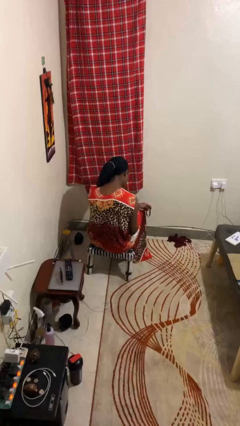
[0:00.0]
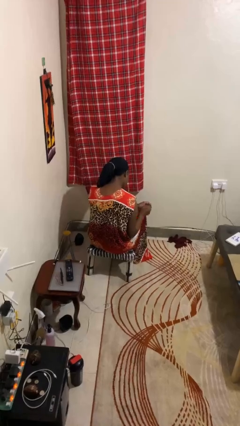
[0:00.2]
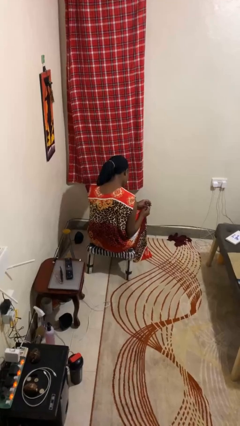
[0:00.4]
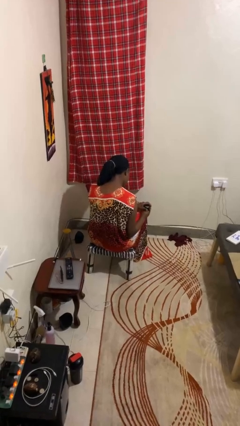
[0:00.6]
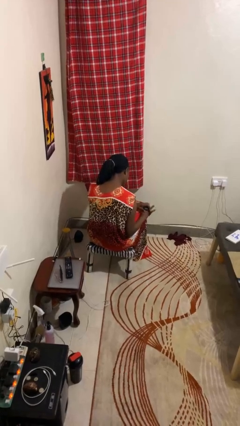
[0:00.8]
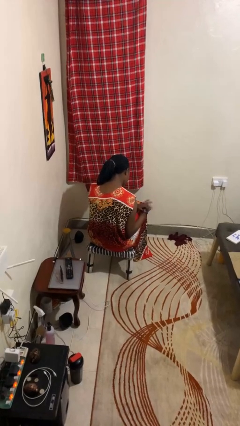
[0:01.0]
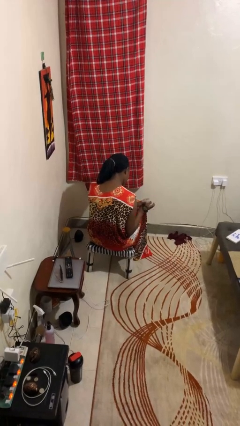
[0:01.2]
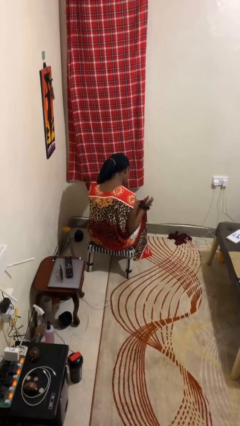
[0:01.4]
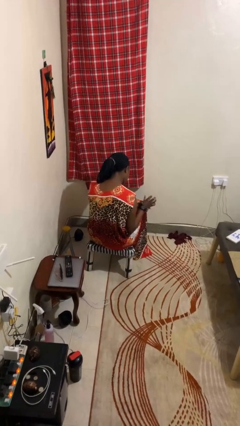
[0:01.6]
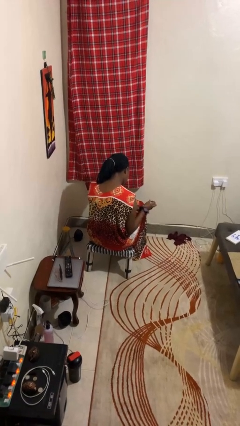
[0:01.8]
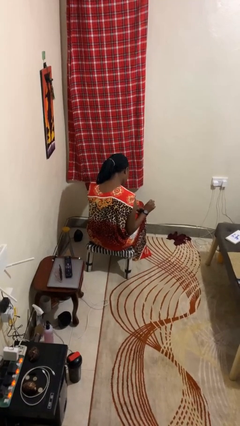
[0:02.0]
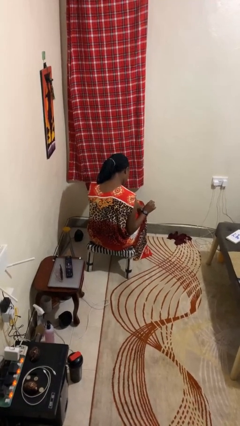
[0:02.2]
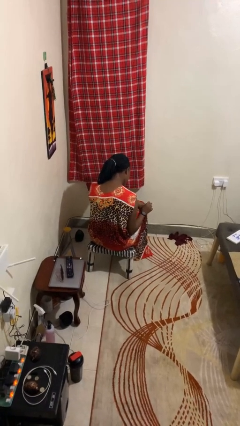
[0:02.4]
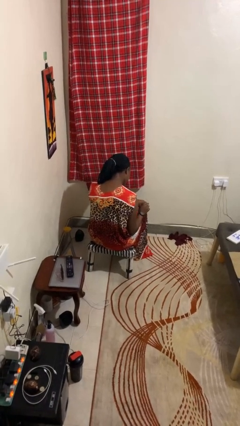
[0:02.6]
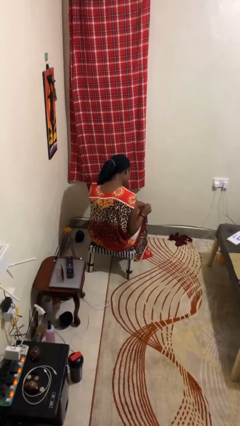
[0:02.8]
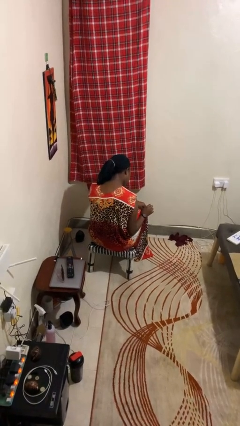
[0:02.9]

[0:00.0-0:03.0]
person puts on wristwatch

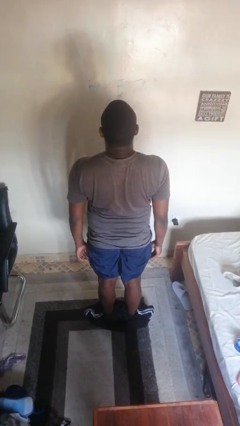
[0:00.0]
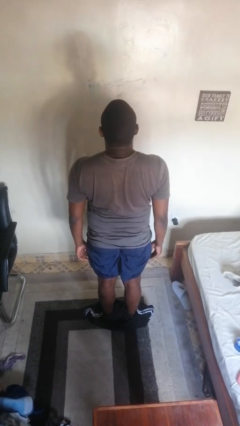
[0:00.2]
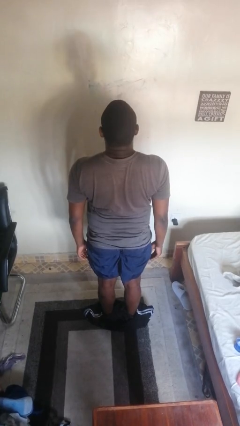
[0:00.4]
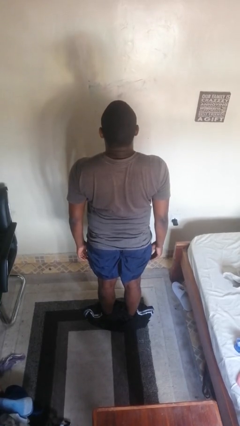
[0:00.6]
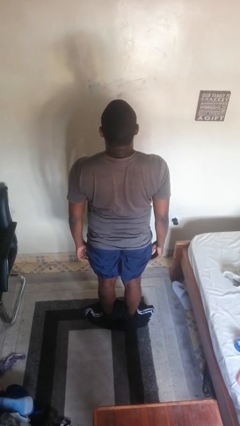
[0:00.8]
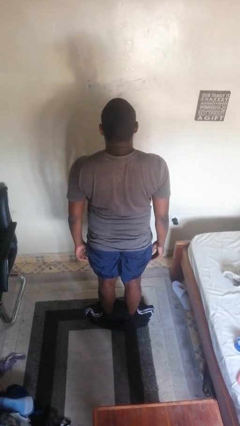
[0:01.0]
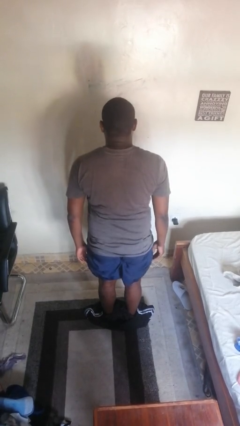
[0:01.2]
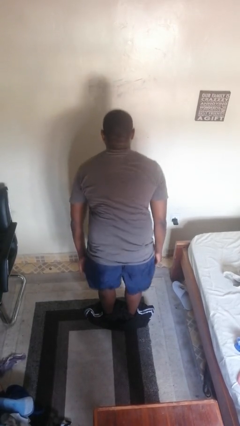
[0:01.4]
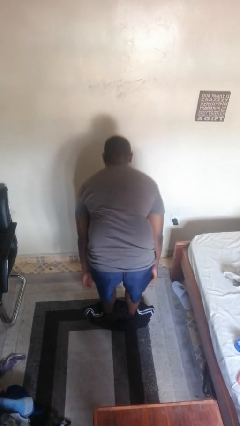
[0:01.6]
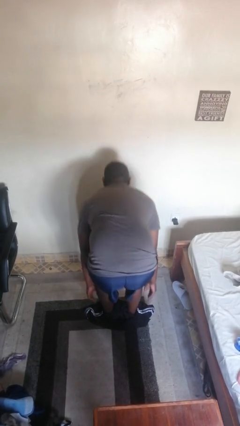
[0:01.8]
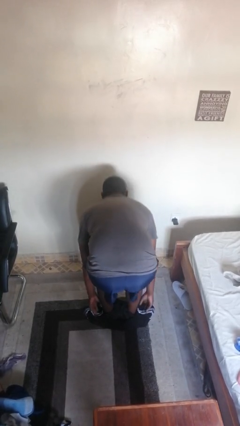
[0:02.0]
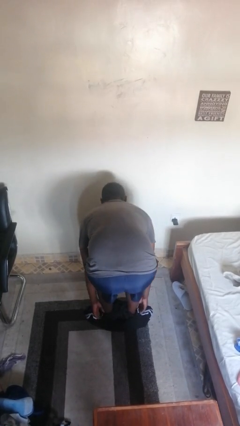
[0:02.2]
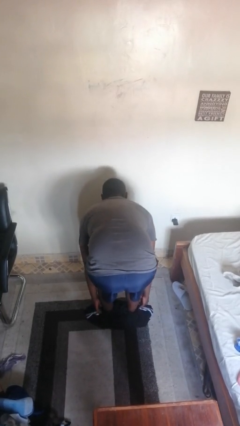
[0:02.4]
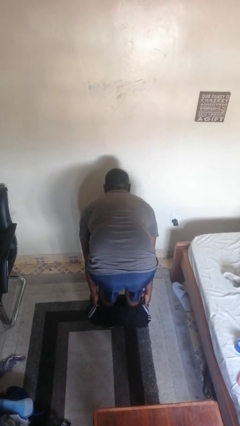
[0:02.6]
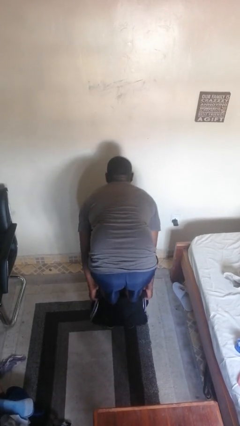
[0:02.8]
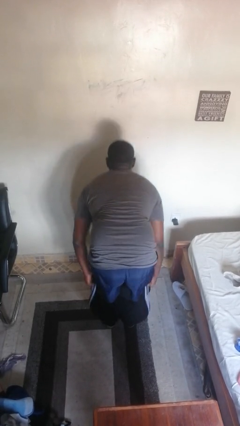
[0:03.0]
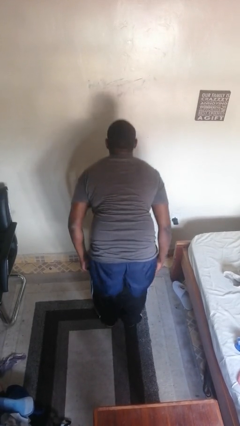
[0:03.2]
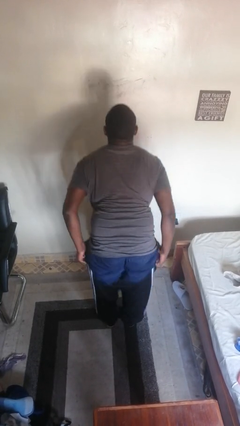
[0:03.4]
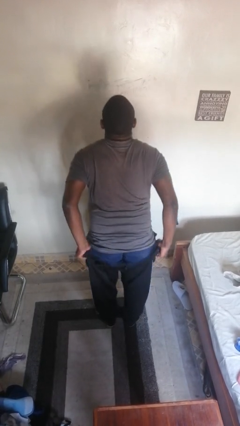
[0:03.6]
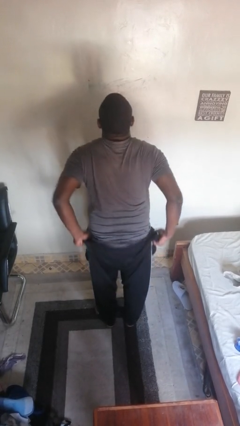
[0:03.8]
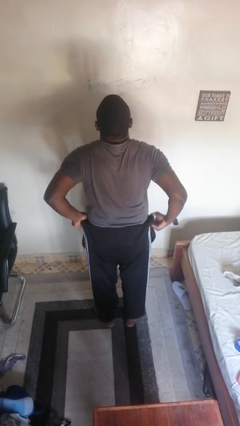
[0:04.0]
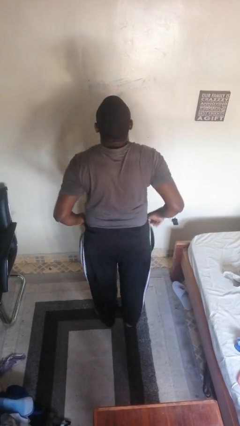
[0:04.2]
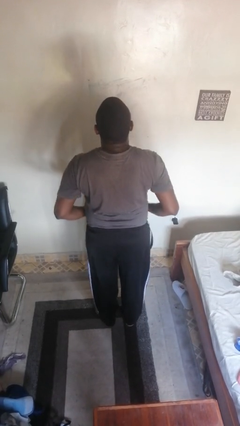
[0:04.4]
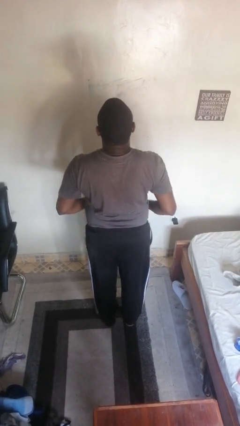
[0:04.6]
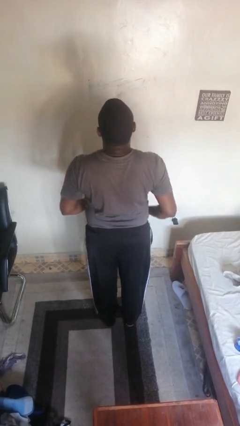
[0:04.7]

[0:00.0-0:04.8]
person puts on pants

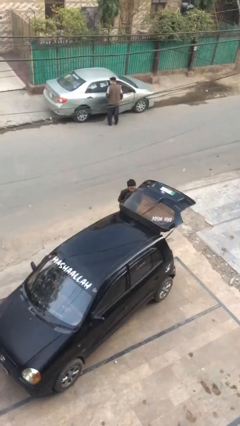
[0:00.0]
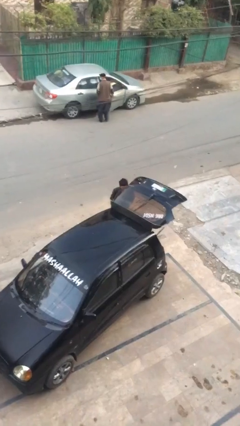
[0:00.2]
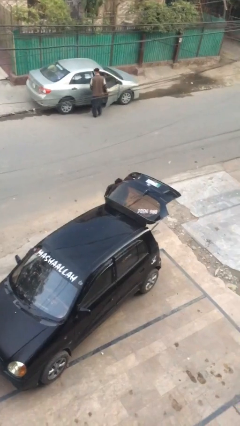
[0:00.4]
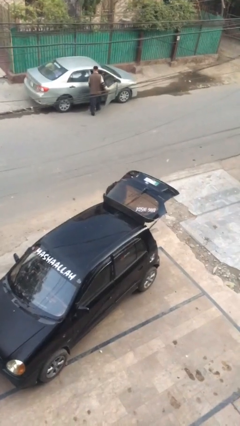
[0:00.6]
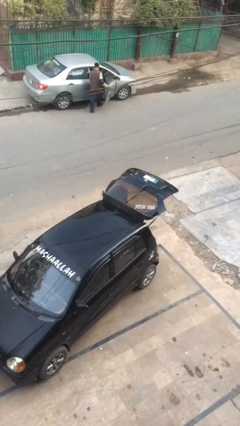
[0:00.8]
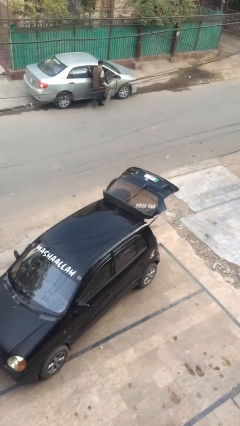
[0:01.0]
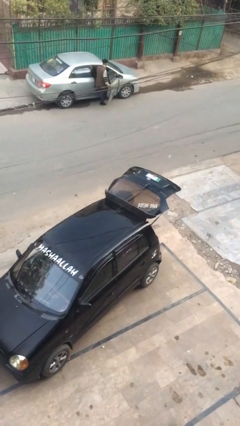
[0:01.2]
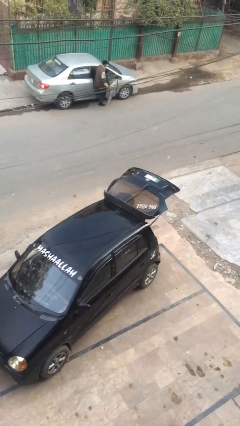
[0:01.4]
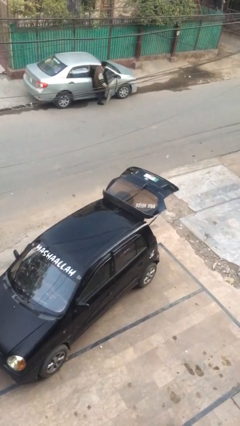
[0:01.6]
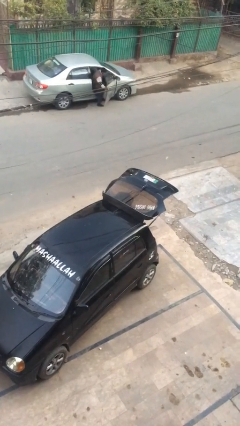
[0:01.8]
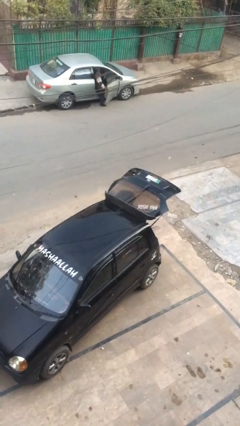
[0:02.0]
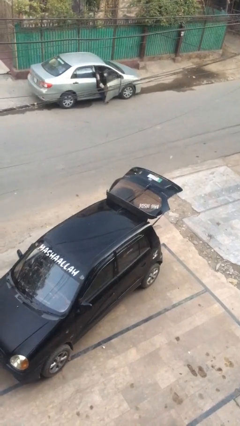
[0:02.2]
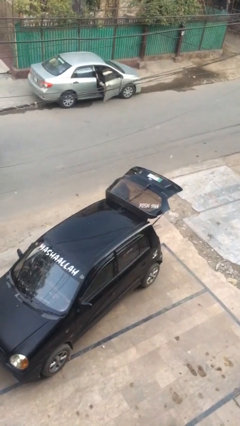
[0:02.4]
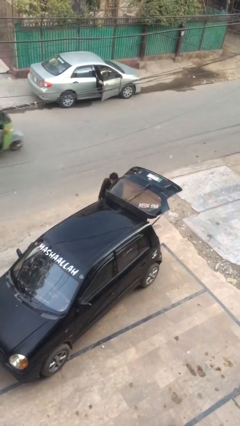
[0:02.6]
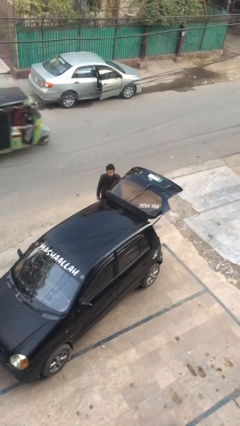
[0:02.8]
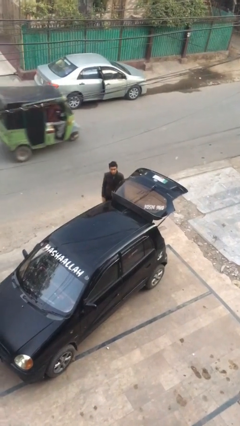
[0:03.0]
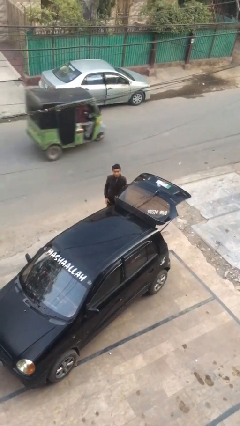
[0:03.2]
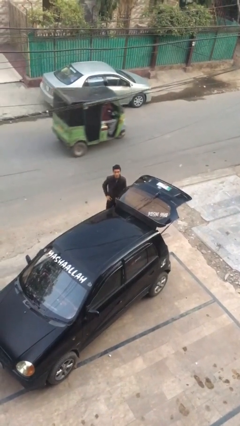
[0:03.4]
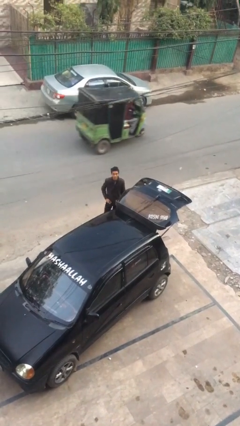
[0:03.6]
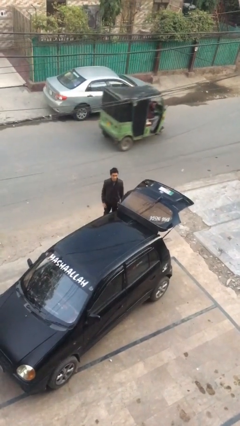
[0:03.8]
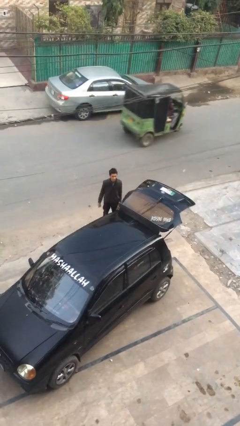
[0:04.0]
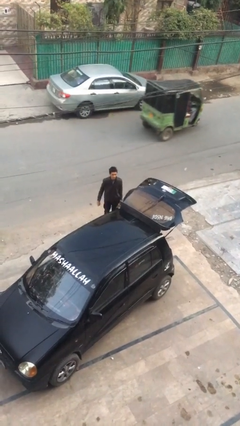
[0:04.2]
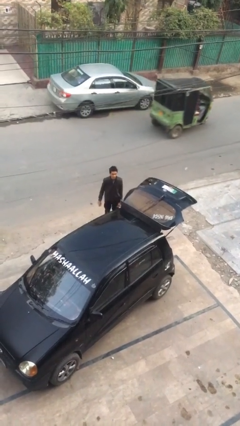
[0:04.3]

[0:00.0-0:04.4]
person loads car

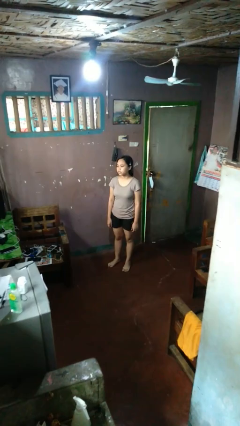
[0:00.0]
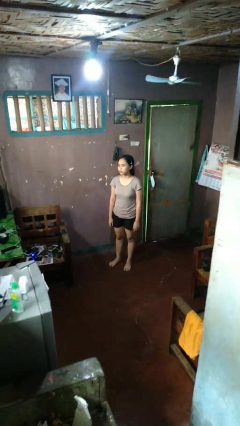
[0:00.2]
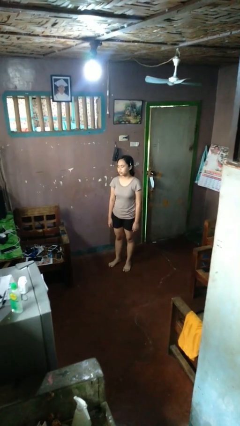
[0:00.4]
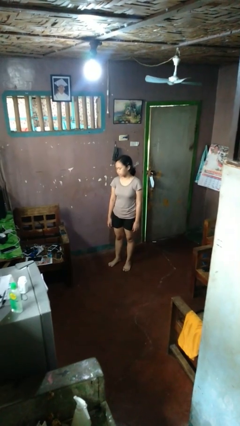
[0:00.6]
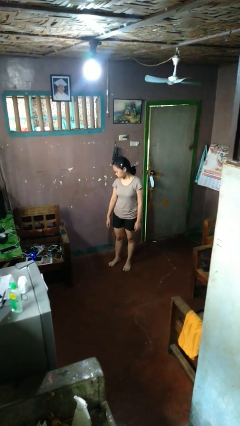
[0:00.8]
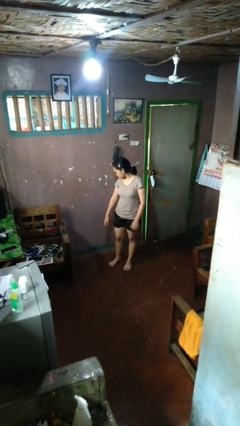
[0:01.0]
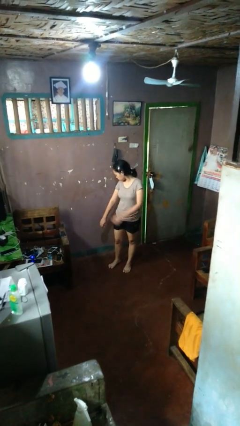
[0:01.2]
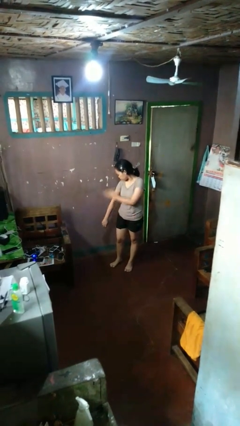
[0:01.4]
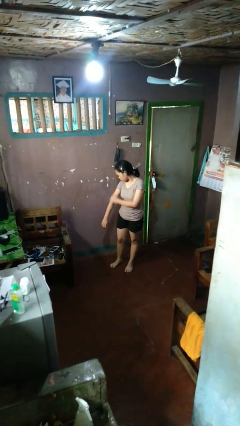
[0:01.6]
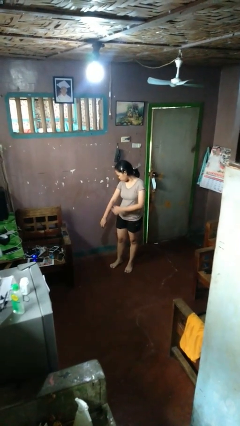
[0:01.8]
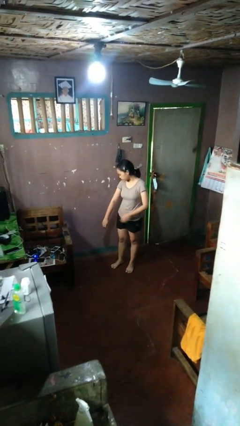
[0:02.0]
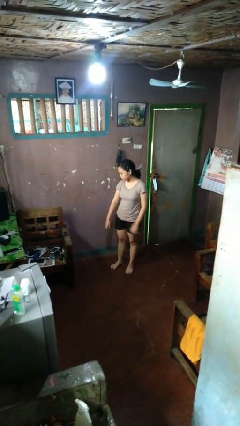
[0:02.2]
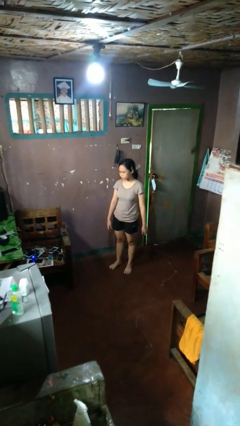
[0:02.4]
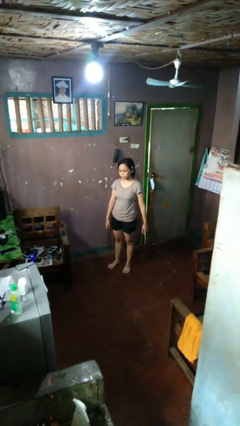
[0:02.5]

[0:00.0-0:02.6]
person swats bug

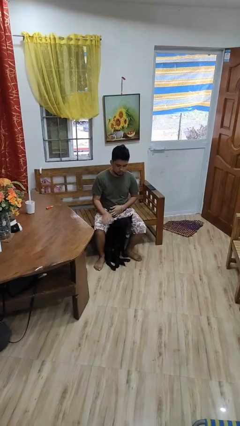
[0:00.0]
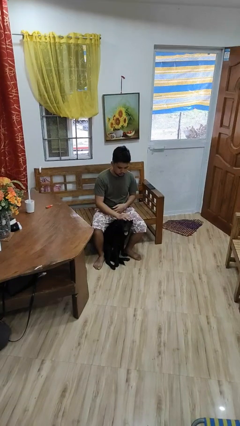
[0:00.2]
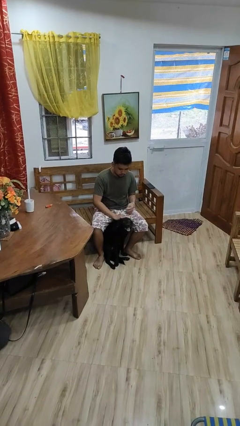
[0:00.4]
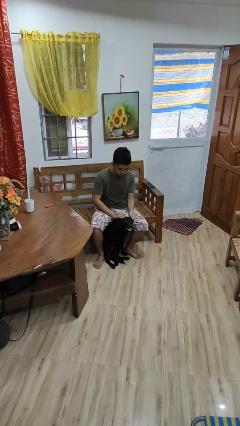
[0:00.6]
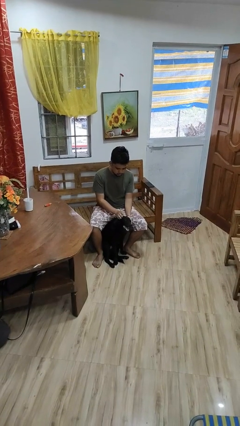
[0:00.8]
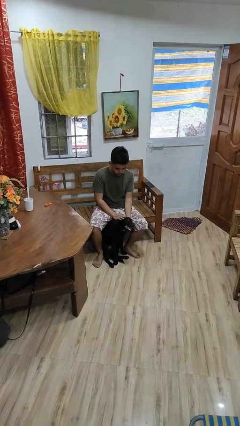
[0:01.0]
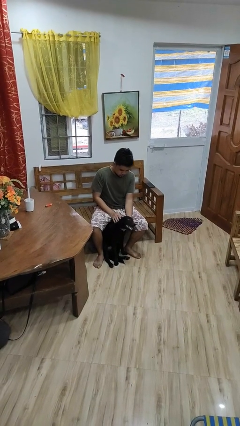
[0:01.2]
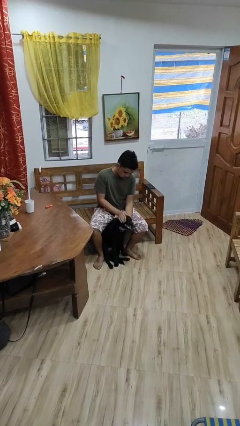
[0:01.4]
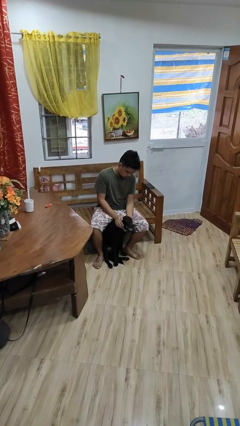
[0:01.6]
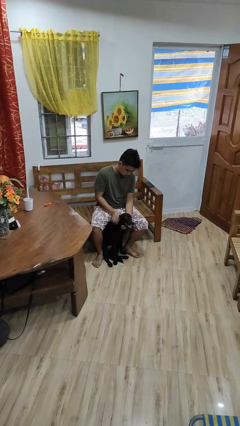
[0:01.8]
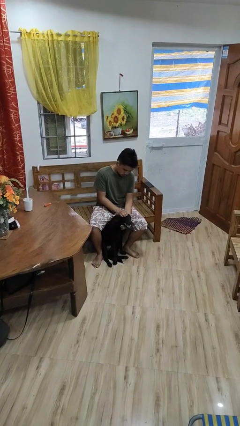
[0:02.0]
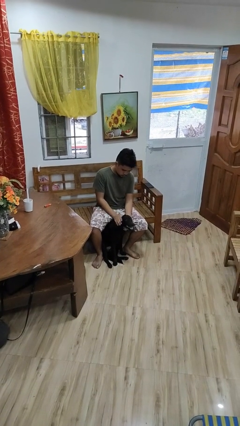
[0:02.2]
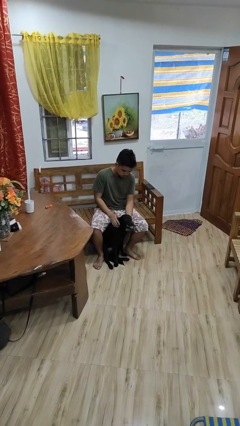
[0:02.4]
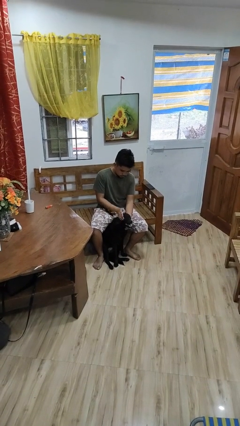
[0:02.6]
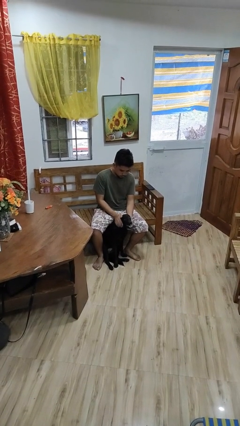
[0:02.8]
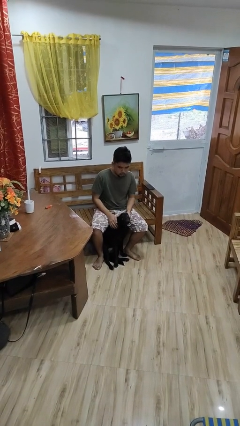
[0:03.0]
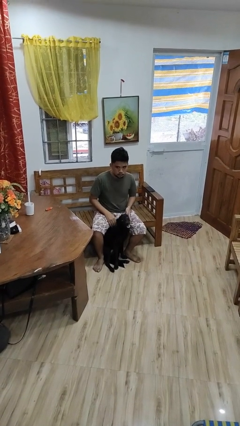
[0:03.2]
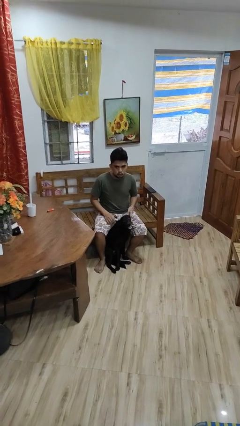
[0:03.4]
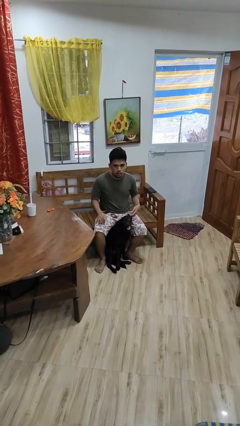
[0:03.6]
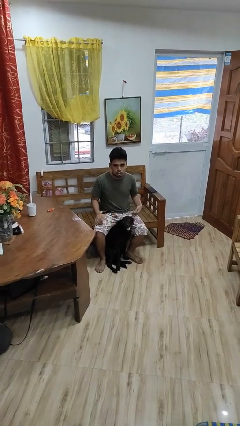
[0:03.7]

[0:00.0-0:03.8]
person pets dog
